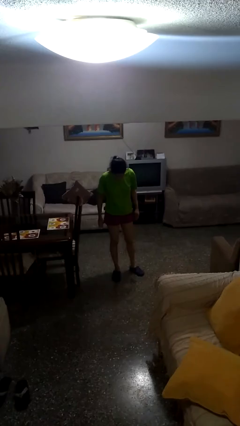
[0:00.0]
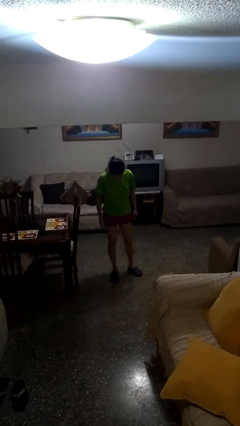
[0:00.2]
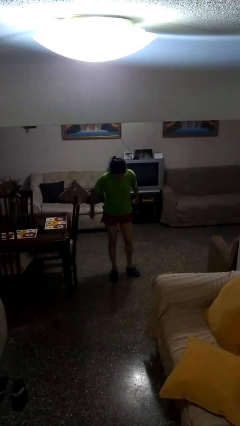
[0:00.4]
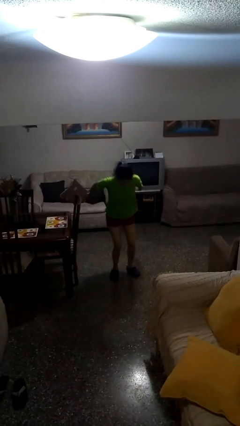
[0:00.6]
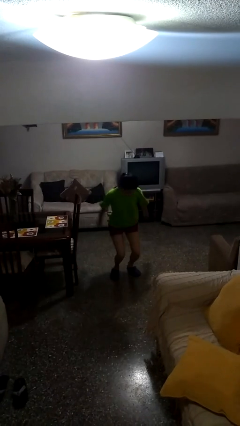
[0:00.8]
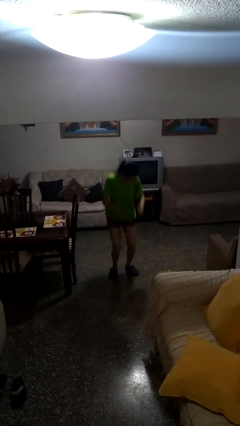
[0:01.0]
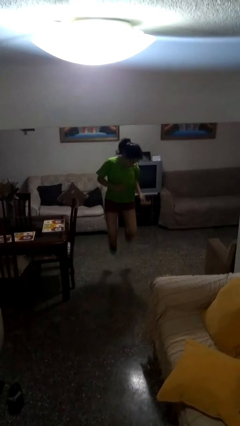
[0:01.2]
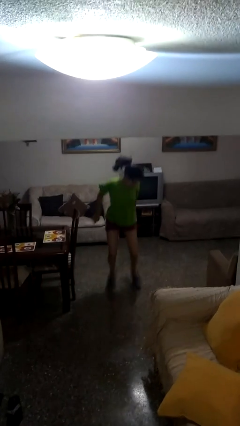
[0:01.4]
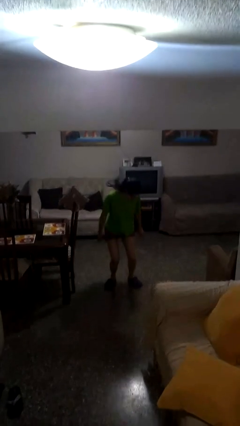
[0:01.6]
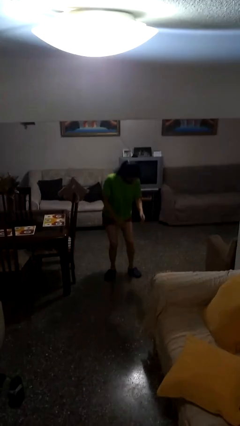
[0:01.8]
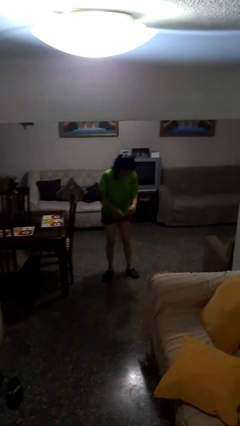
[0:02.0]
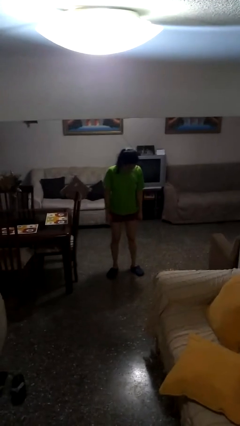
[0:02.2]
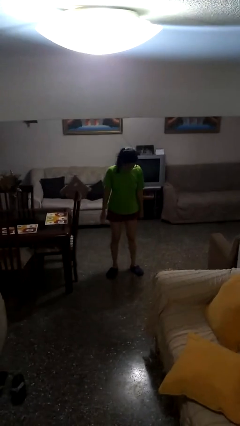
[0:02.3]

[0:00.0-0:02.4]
person jumps

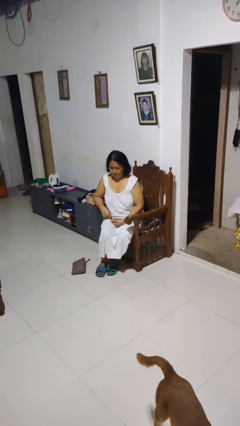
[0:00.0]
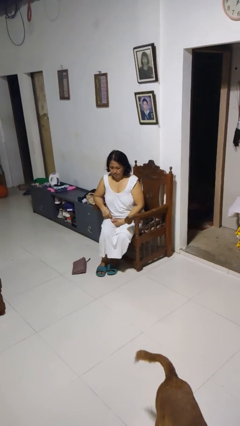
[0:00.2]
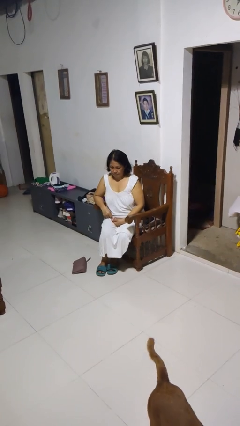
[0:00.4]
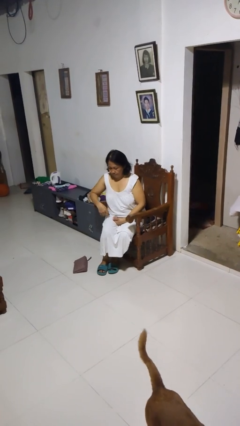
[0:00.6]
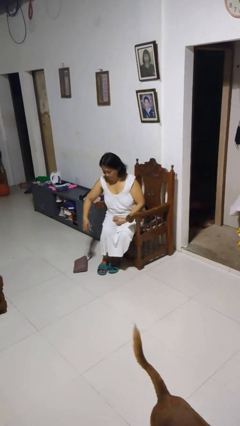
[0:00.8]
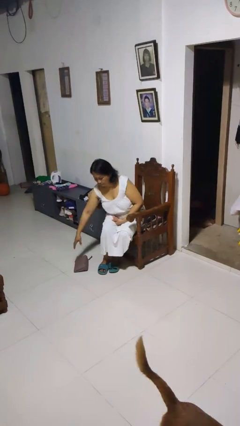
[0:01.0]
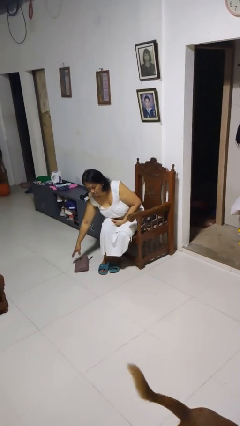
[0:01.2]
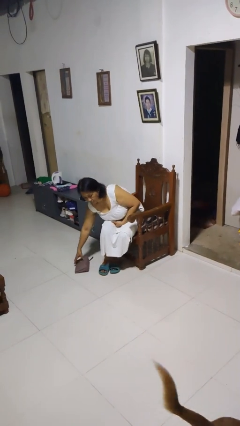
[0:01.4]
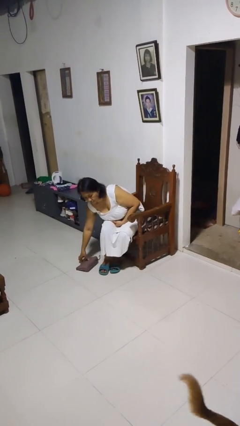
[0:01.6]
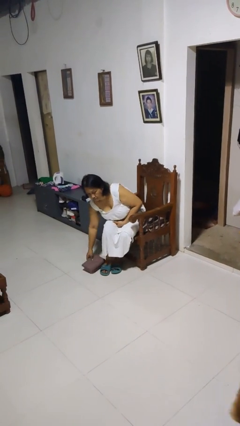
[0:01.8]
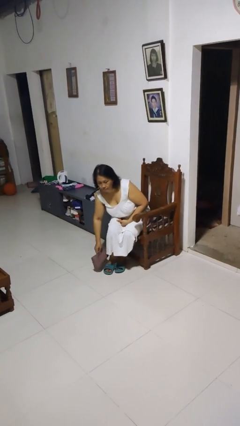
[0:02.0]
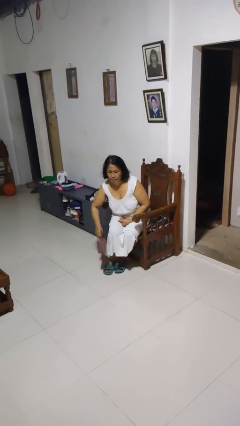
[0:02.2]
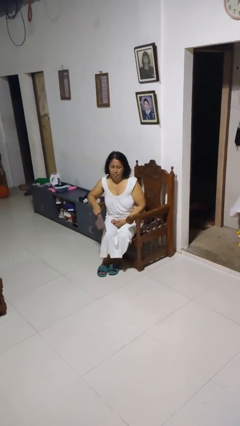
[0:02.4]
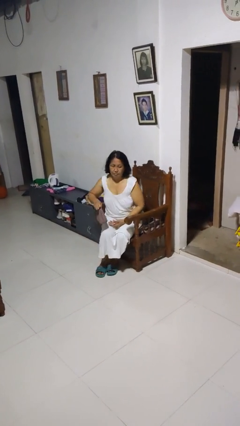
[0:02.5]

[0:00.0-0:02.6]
person picks up object from floor

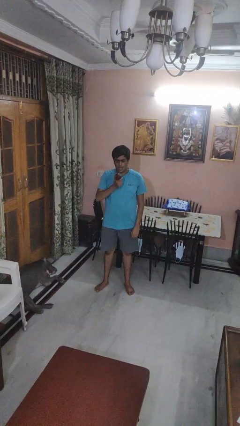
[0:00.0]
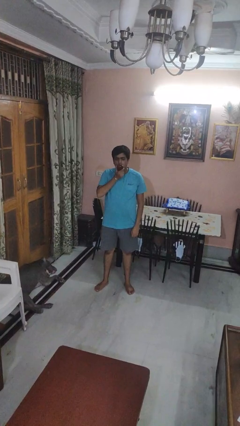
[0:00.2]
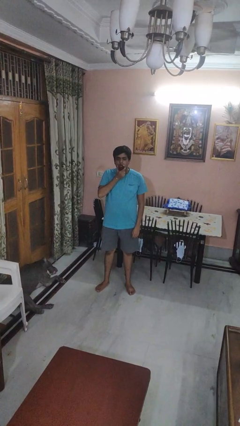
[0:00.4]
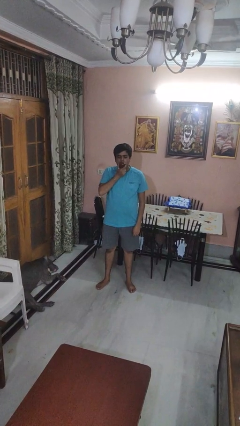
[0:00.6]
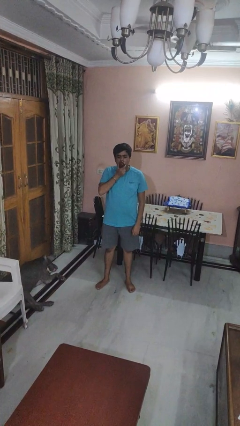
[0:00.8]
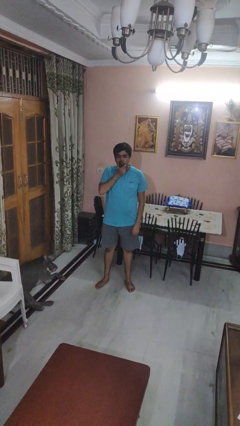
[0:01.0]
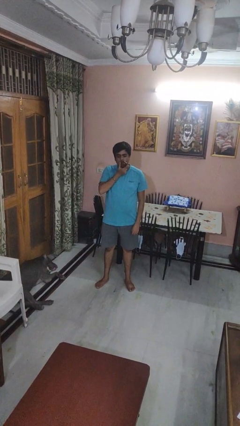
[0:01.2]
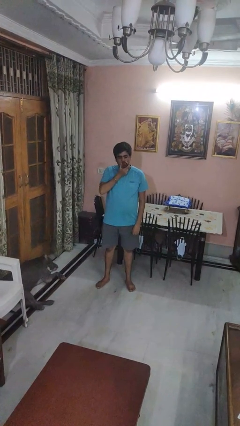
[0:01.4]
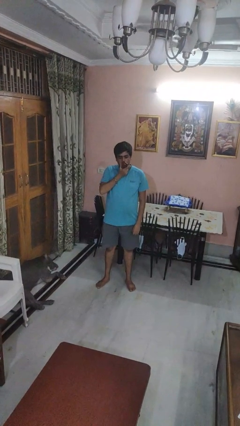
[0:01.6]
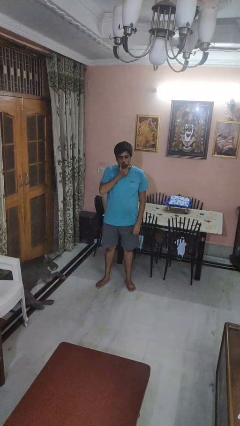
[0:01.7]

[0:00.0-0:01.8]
person eats apple

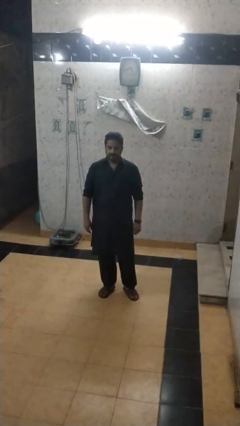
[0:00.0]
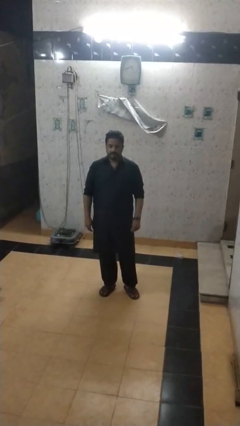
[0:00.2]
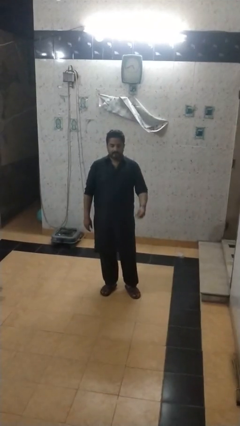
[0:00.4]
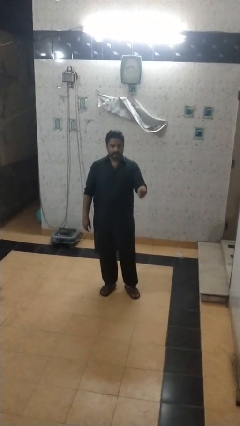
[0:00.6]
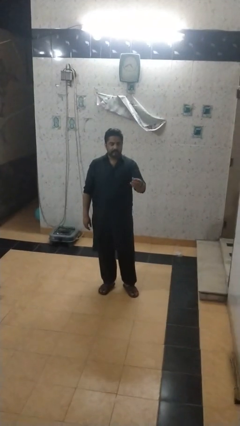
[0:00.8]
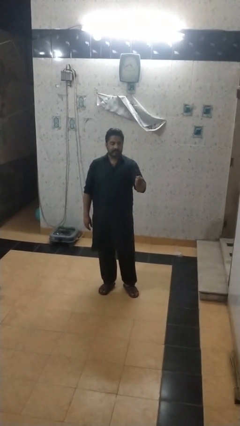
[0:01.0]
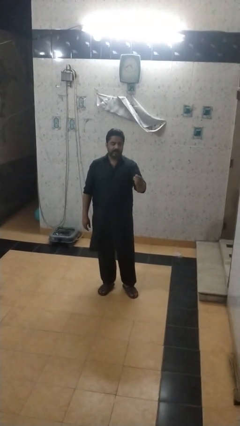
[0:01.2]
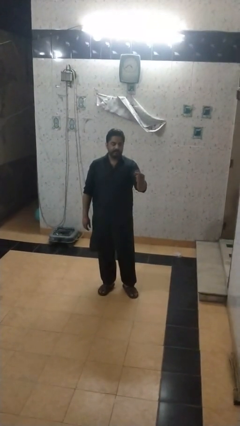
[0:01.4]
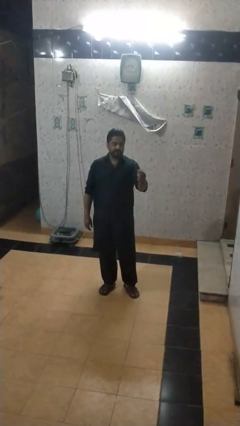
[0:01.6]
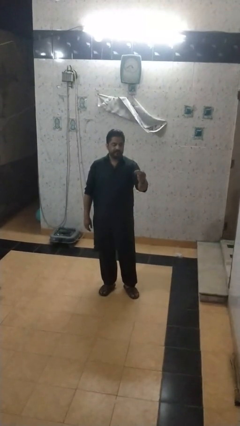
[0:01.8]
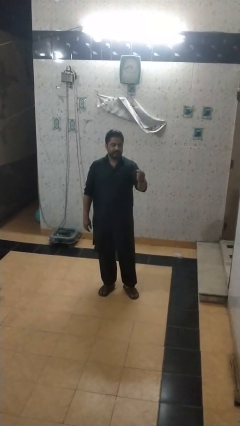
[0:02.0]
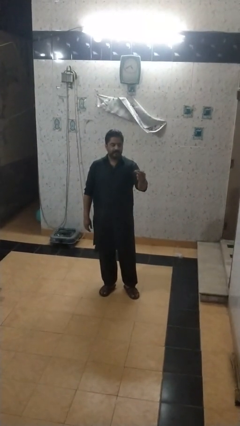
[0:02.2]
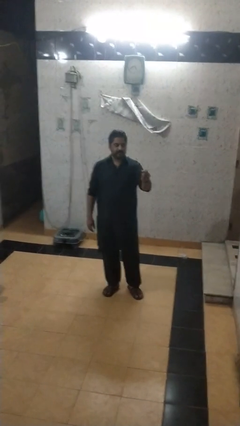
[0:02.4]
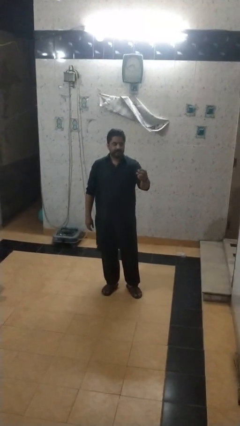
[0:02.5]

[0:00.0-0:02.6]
person snaps fingers

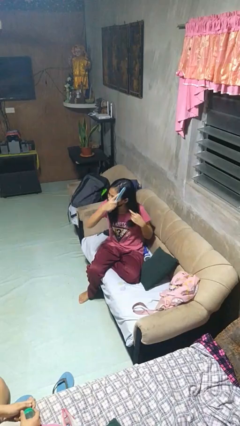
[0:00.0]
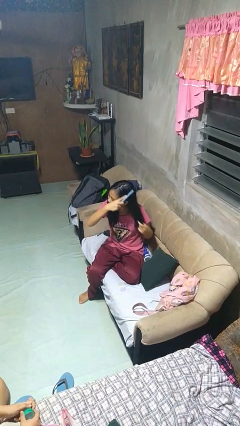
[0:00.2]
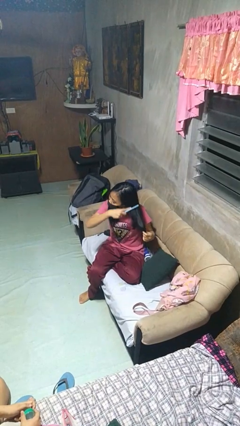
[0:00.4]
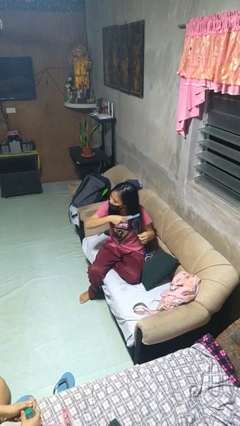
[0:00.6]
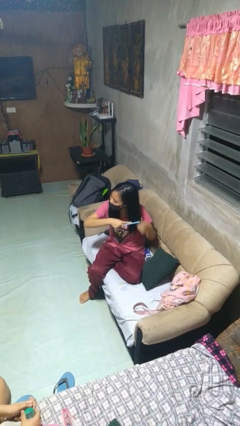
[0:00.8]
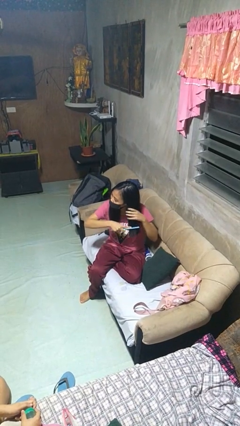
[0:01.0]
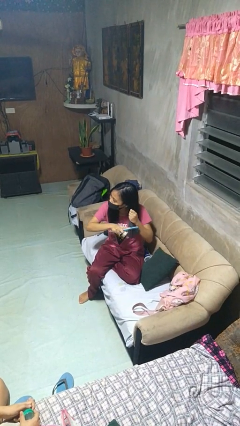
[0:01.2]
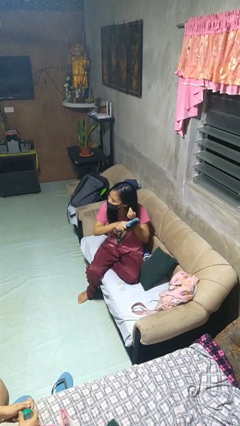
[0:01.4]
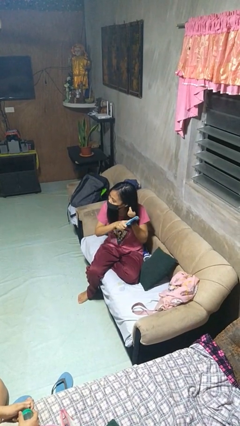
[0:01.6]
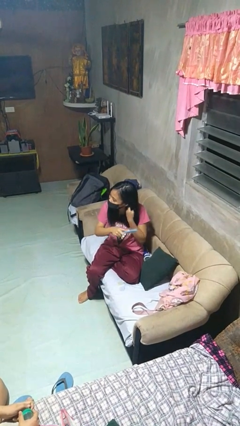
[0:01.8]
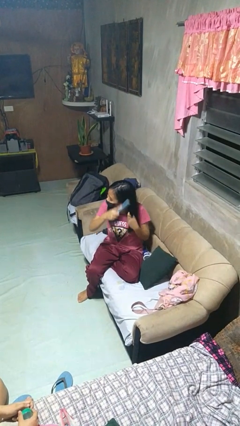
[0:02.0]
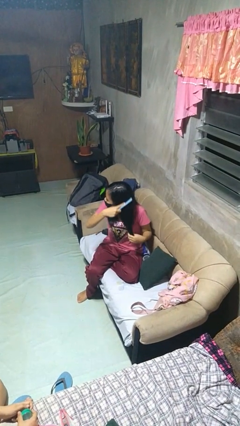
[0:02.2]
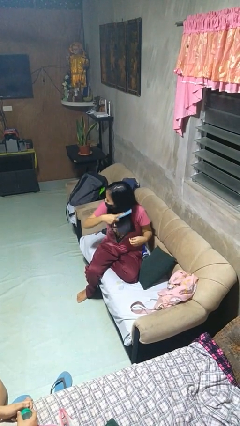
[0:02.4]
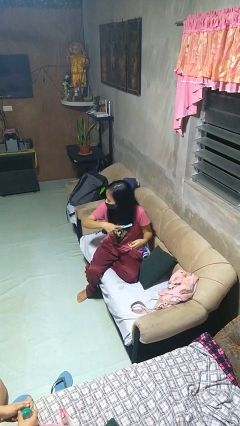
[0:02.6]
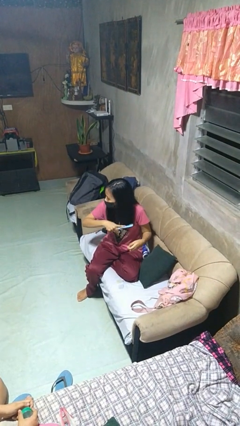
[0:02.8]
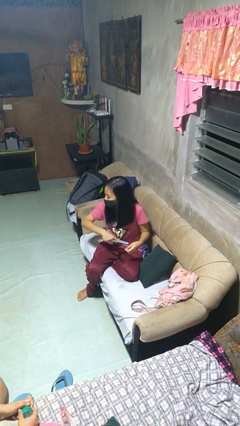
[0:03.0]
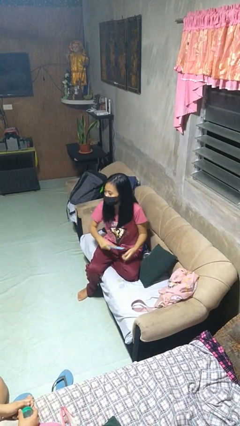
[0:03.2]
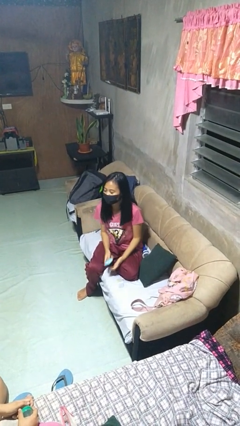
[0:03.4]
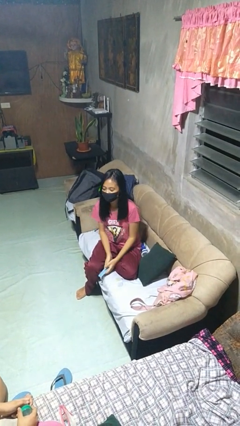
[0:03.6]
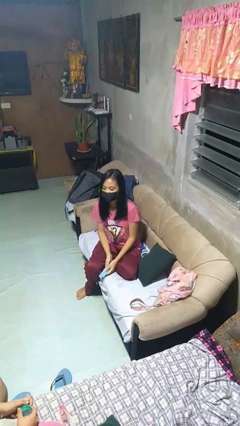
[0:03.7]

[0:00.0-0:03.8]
person brushes hair

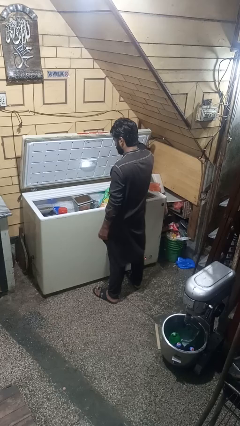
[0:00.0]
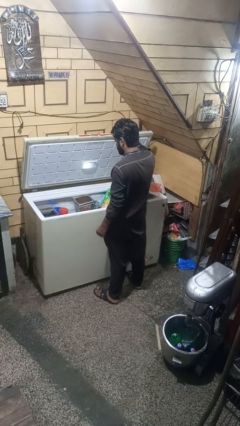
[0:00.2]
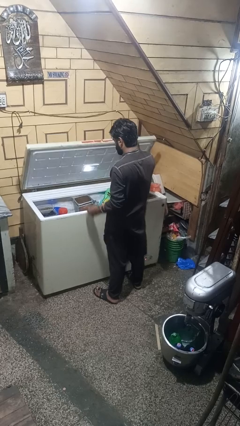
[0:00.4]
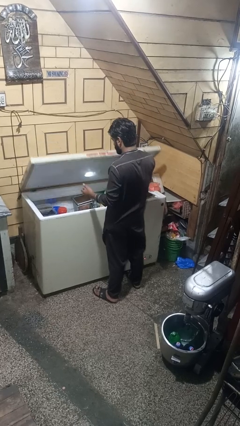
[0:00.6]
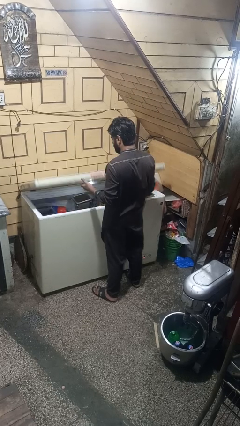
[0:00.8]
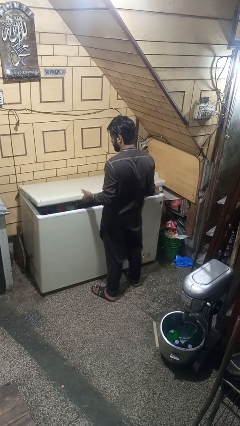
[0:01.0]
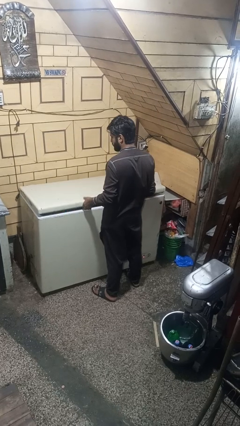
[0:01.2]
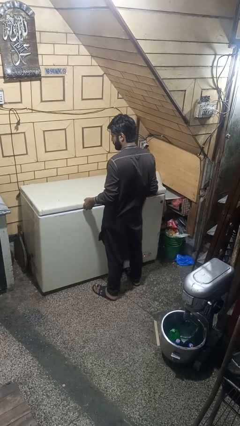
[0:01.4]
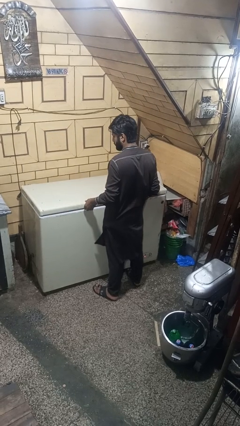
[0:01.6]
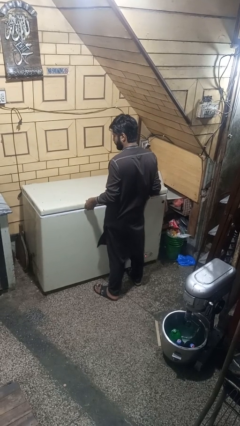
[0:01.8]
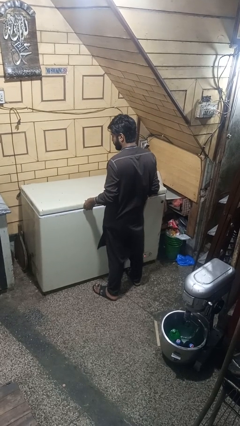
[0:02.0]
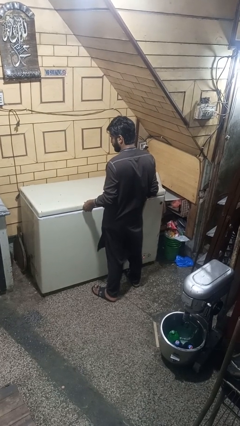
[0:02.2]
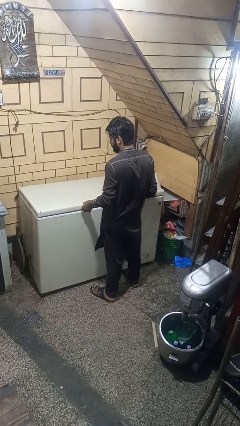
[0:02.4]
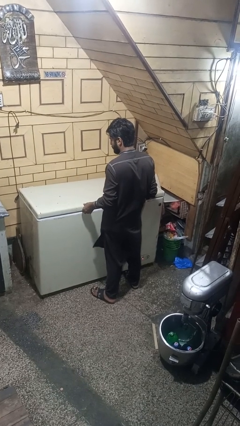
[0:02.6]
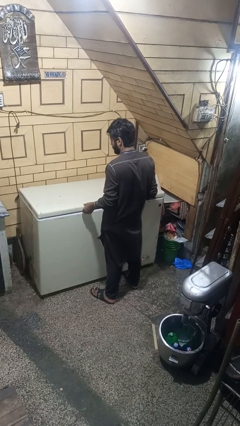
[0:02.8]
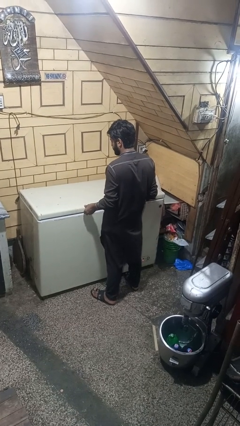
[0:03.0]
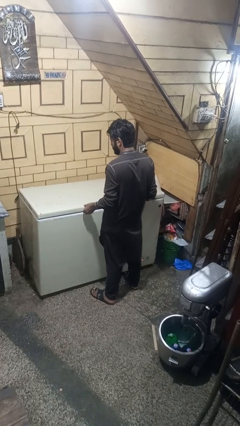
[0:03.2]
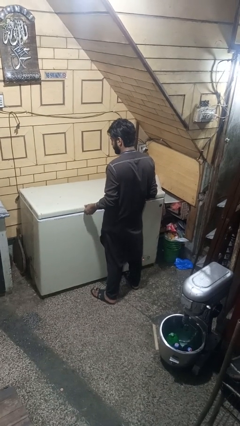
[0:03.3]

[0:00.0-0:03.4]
person closes refrigerator

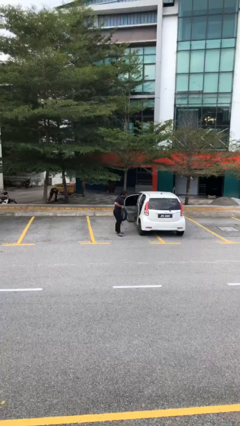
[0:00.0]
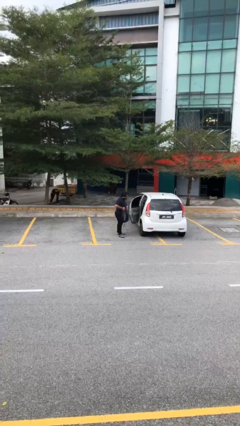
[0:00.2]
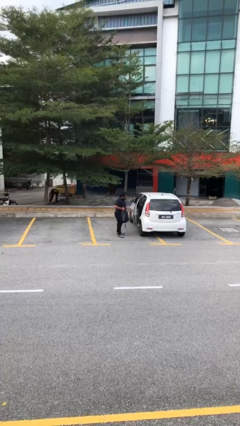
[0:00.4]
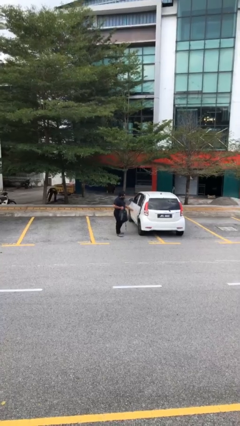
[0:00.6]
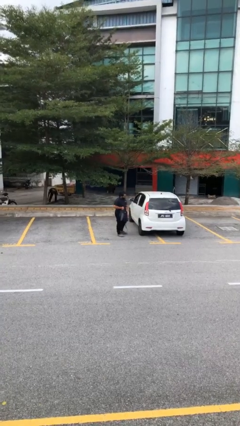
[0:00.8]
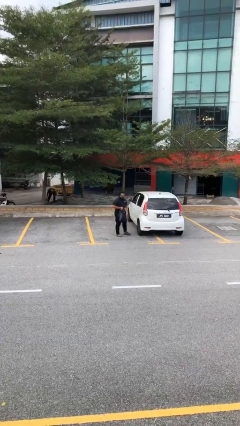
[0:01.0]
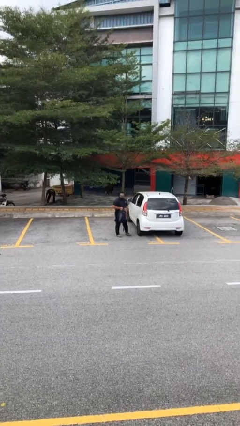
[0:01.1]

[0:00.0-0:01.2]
person closes car door
